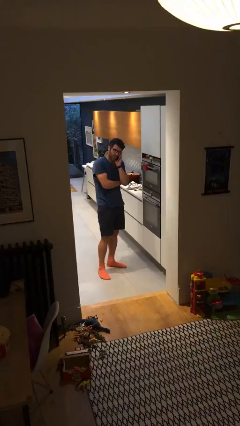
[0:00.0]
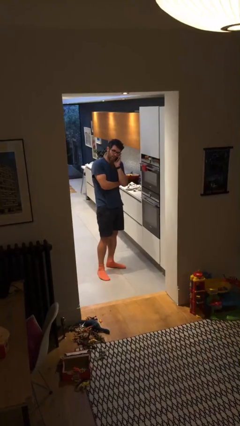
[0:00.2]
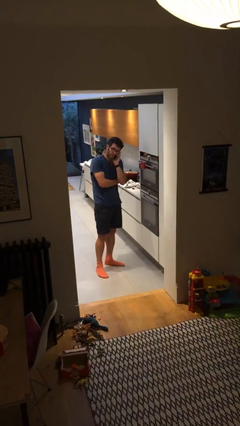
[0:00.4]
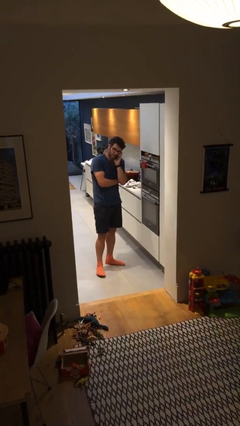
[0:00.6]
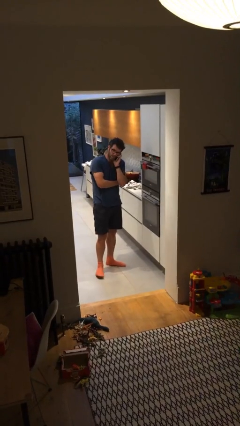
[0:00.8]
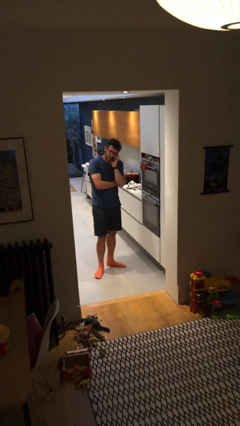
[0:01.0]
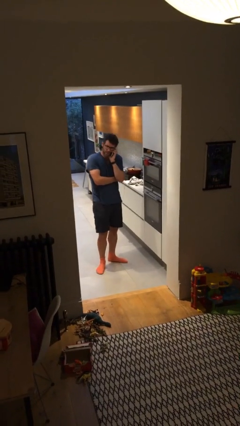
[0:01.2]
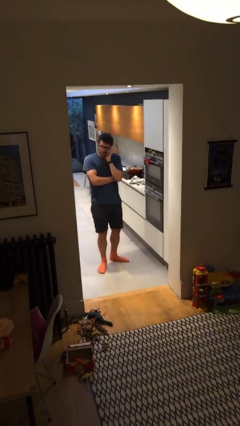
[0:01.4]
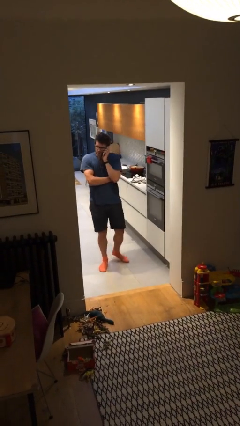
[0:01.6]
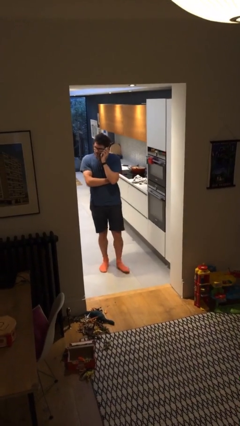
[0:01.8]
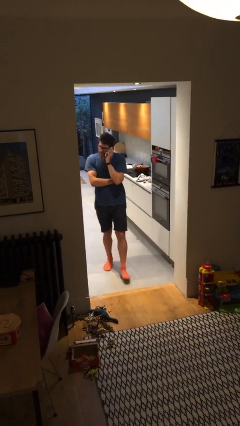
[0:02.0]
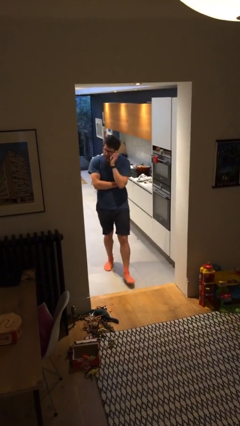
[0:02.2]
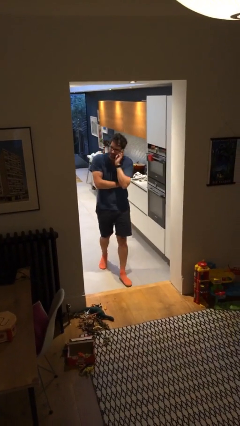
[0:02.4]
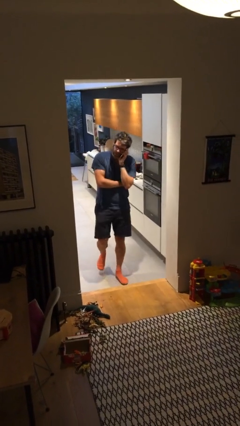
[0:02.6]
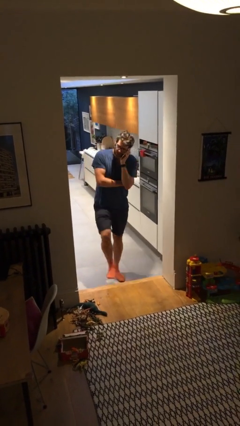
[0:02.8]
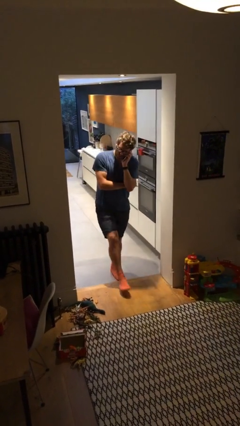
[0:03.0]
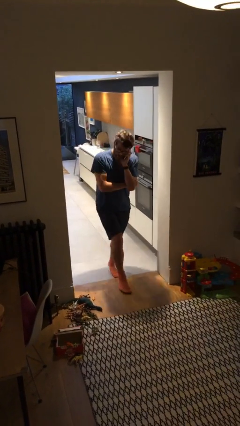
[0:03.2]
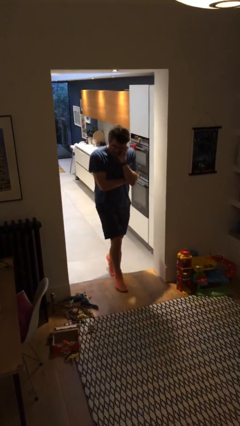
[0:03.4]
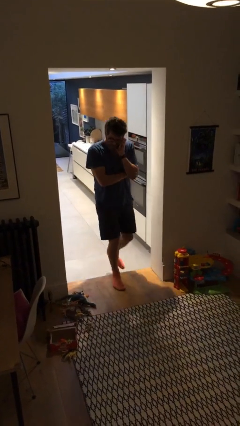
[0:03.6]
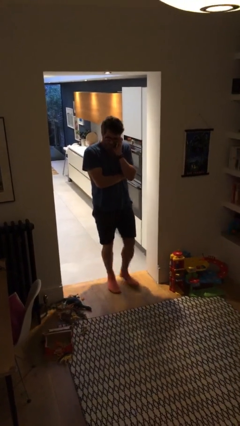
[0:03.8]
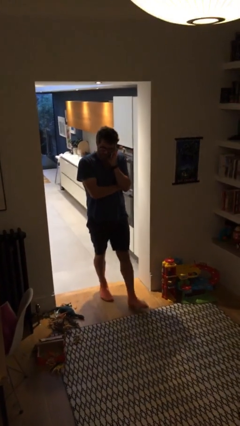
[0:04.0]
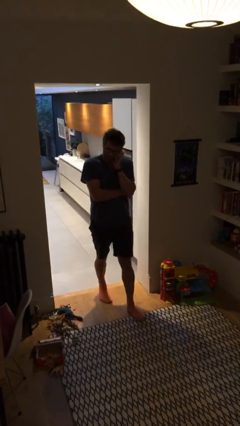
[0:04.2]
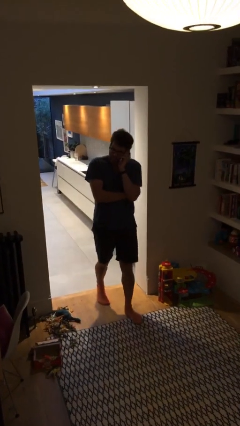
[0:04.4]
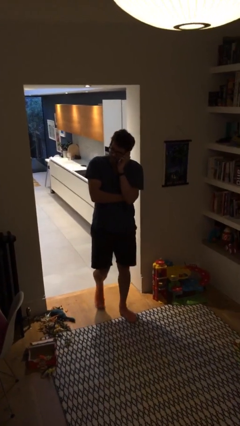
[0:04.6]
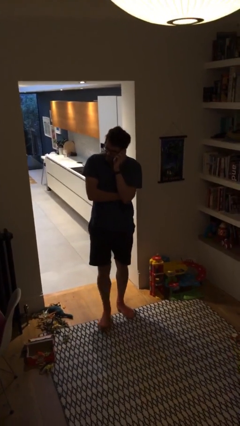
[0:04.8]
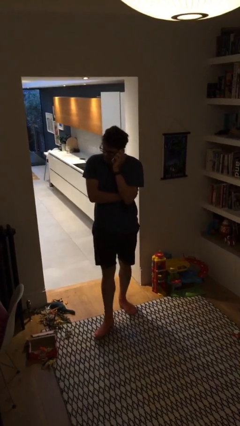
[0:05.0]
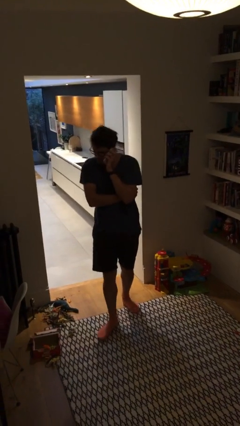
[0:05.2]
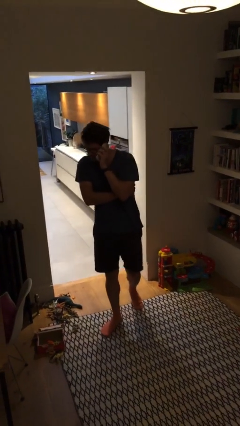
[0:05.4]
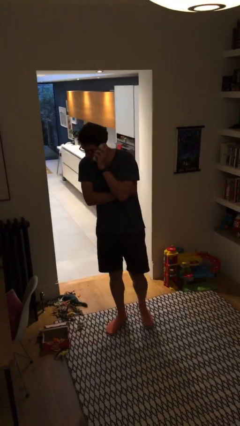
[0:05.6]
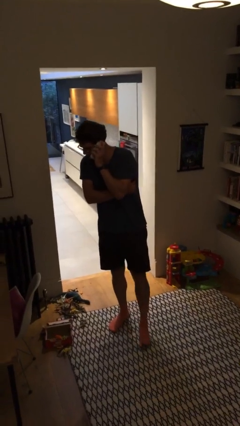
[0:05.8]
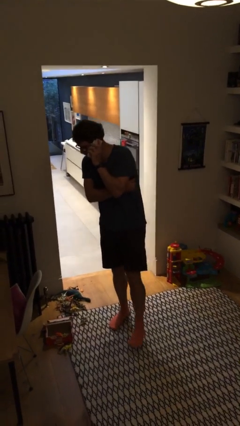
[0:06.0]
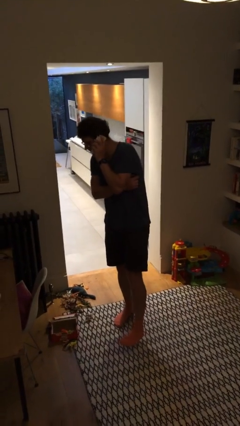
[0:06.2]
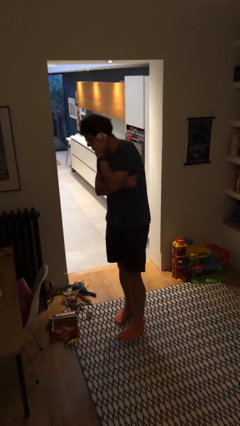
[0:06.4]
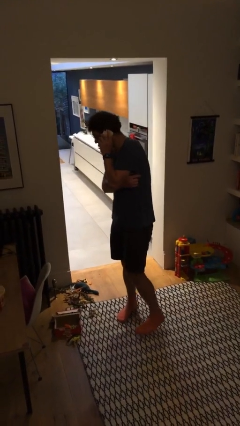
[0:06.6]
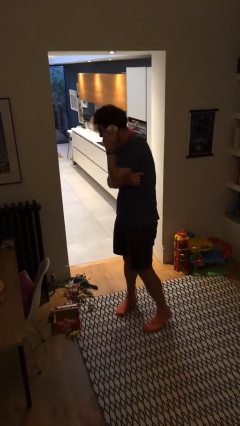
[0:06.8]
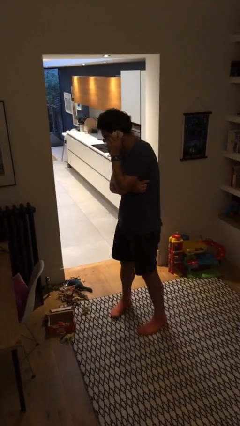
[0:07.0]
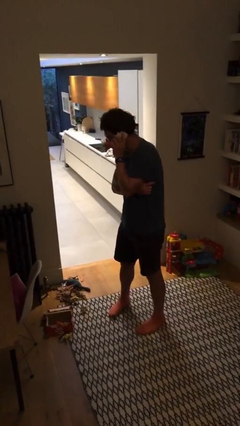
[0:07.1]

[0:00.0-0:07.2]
person enters scene through structure

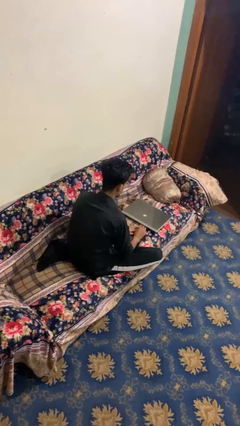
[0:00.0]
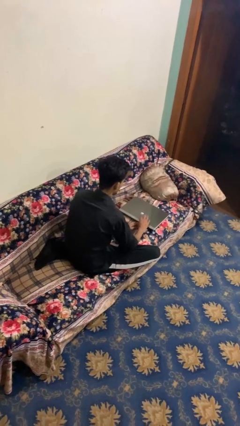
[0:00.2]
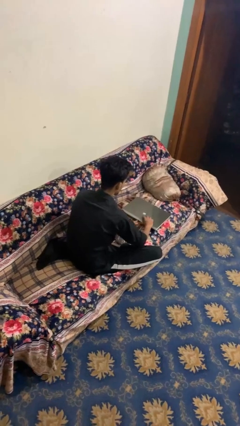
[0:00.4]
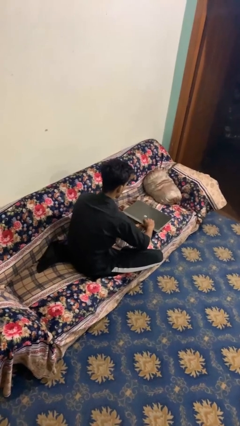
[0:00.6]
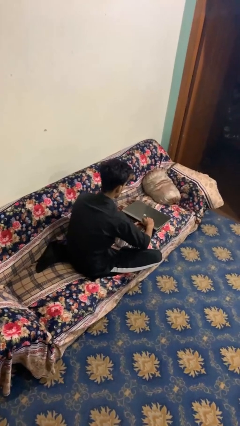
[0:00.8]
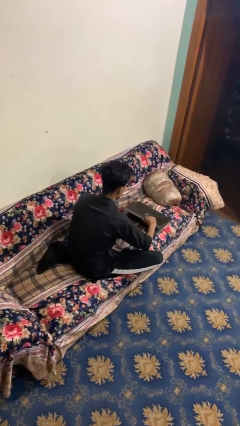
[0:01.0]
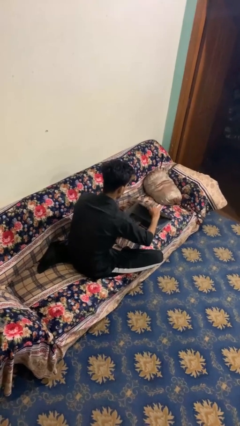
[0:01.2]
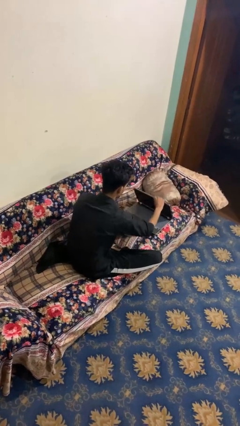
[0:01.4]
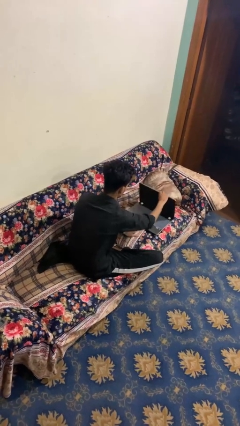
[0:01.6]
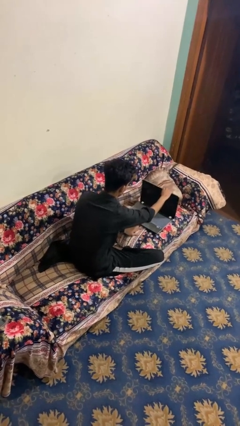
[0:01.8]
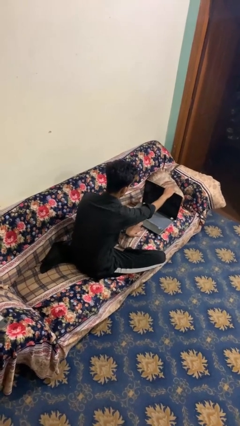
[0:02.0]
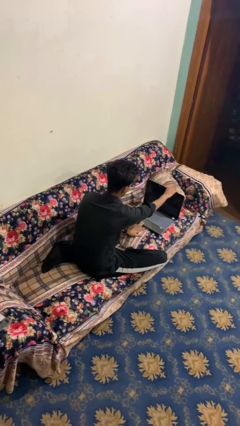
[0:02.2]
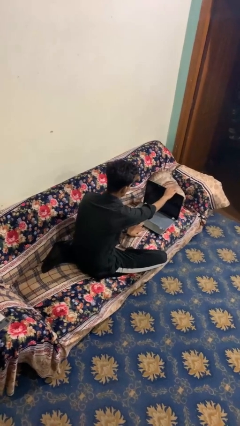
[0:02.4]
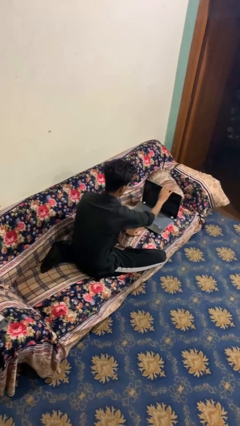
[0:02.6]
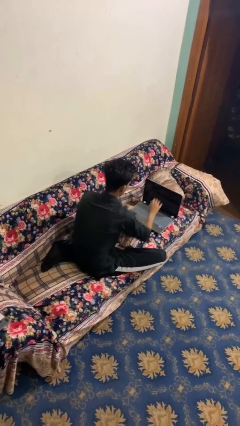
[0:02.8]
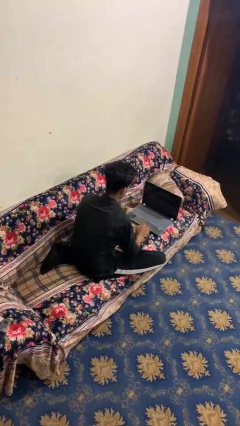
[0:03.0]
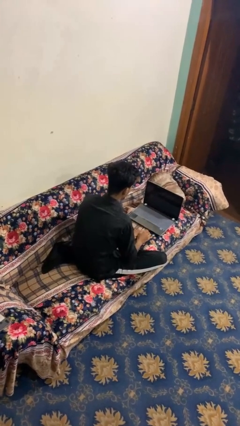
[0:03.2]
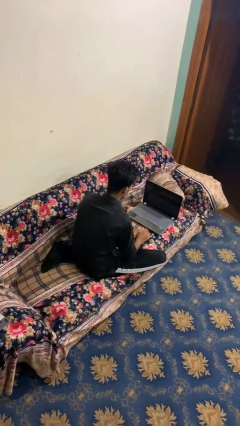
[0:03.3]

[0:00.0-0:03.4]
person opens laptop

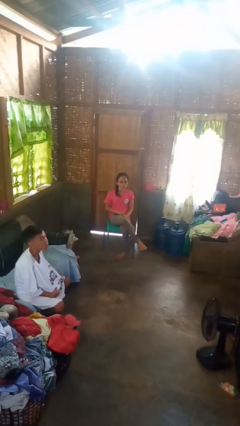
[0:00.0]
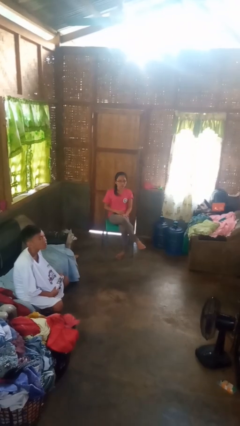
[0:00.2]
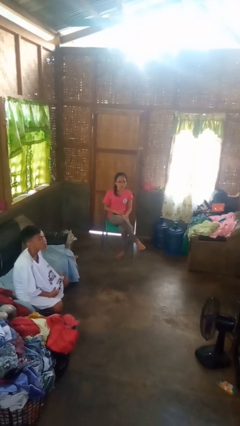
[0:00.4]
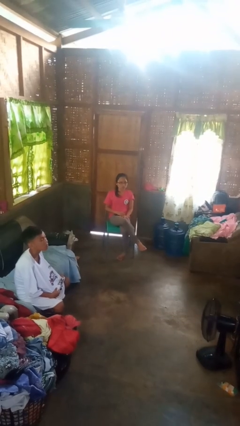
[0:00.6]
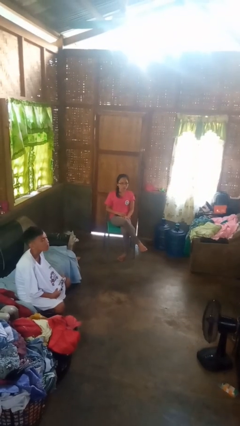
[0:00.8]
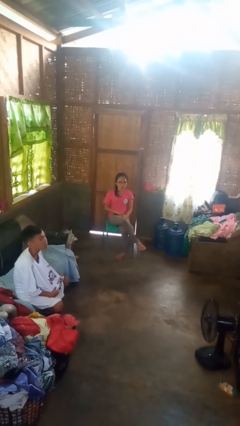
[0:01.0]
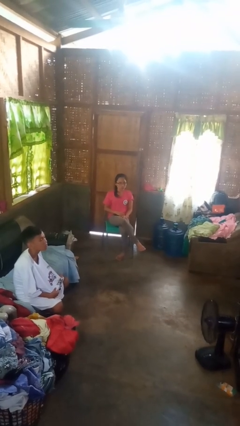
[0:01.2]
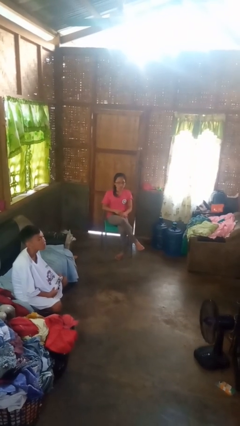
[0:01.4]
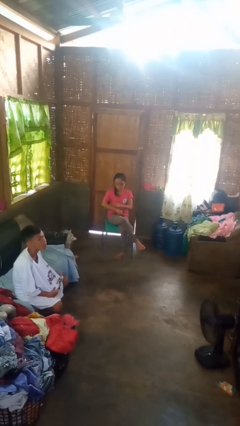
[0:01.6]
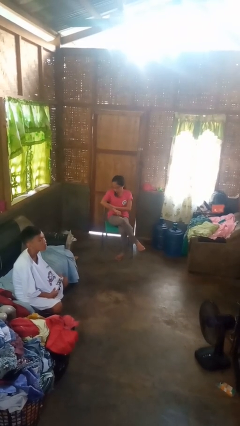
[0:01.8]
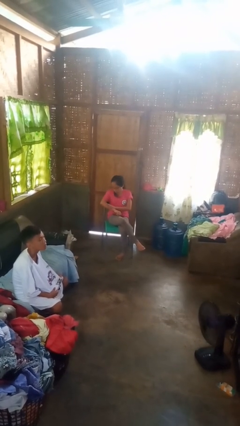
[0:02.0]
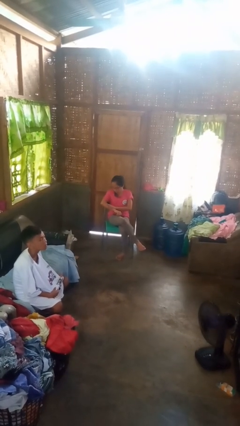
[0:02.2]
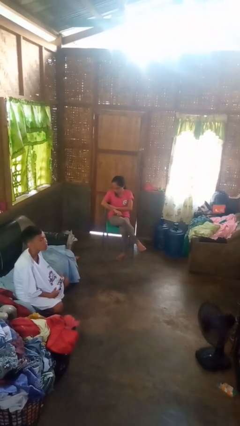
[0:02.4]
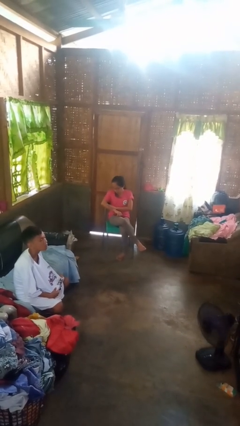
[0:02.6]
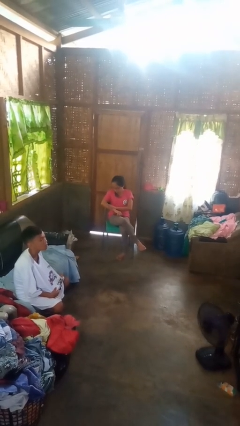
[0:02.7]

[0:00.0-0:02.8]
person swats bug

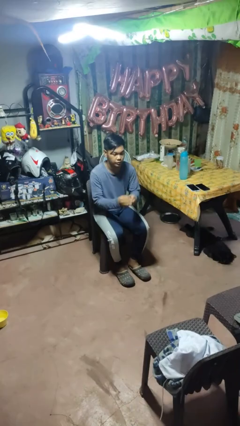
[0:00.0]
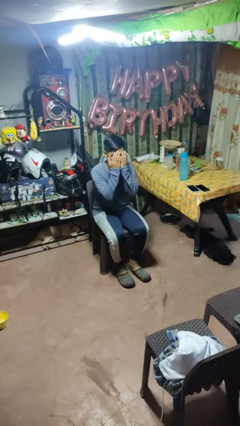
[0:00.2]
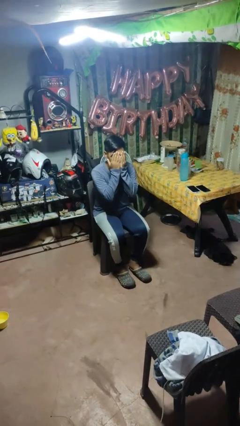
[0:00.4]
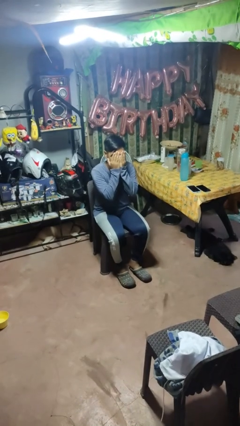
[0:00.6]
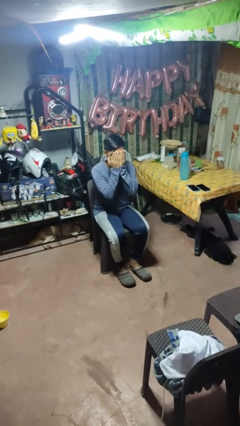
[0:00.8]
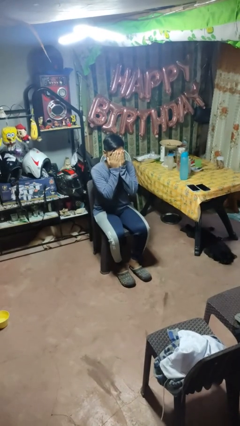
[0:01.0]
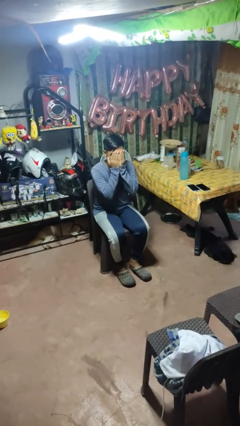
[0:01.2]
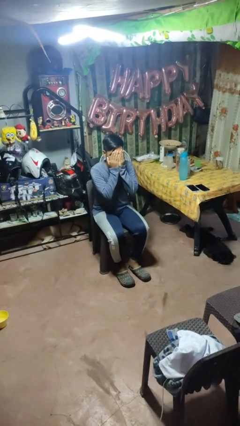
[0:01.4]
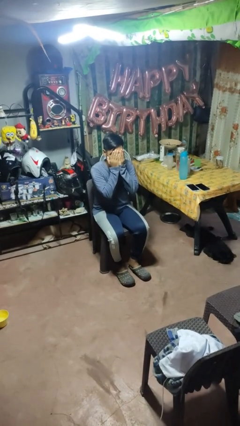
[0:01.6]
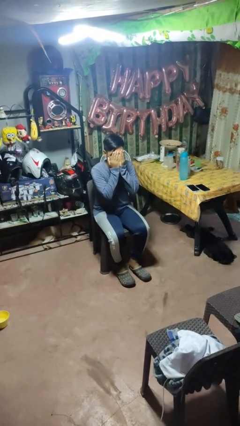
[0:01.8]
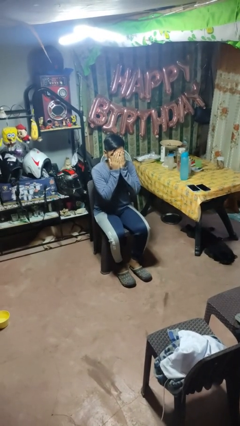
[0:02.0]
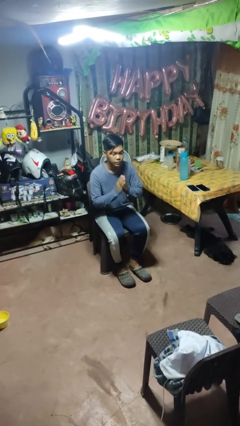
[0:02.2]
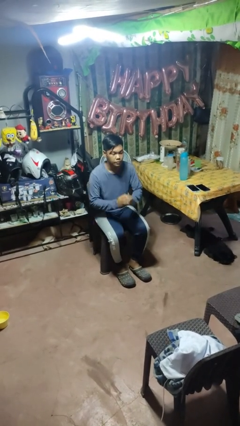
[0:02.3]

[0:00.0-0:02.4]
person covers face with hands

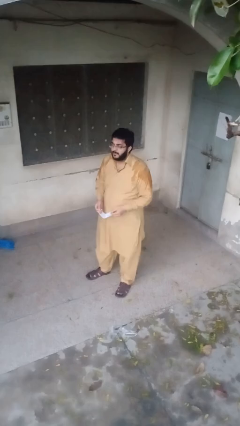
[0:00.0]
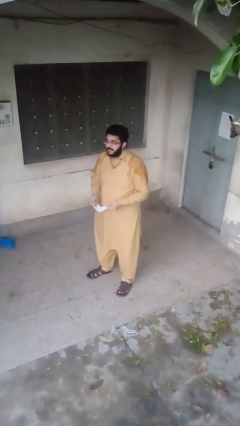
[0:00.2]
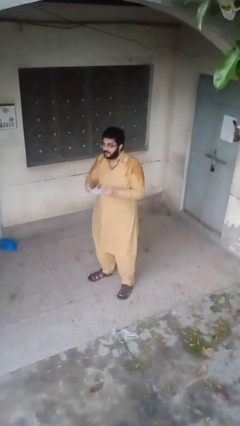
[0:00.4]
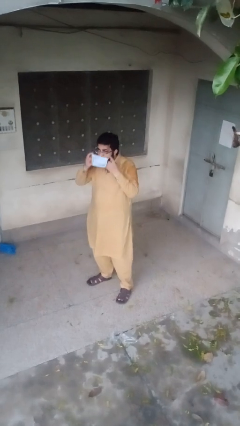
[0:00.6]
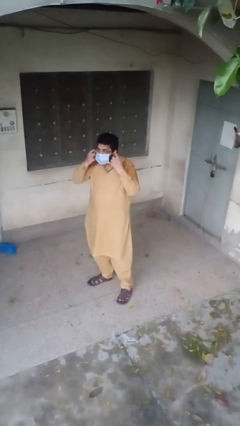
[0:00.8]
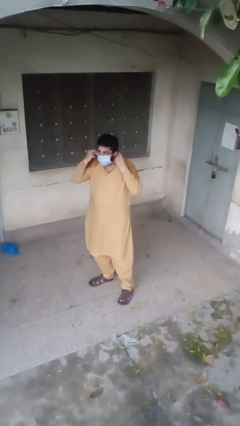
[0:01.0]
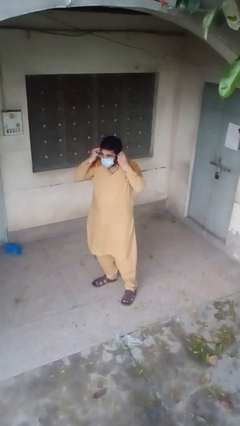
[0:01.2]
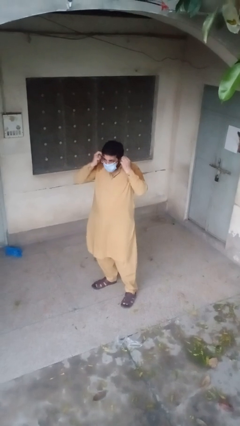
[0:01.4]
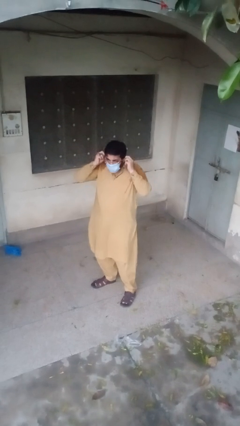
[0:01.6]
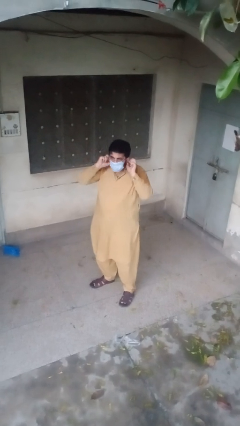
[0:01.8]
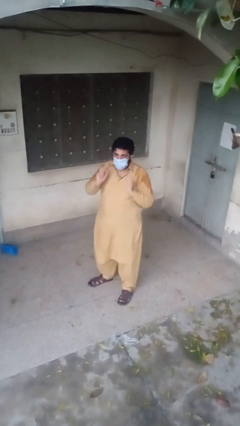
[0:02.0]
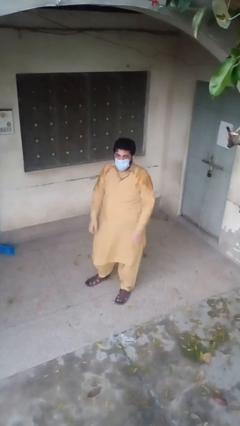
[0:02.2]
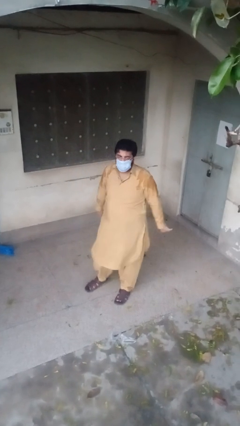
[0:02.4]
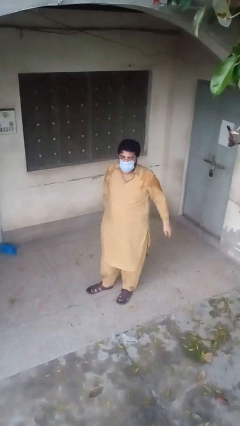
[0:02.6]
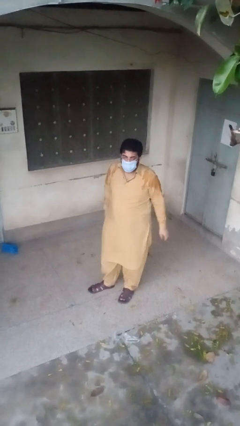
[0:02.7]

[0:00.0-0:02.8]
person puts on facemask
